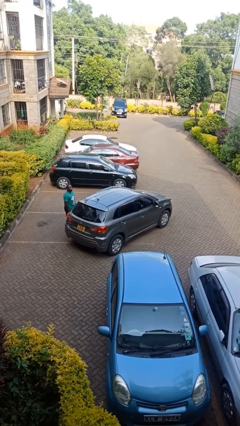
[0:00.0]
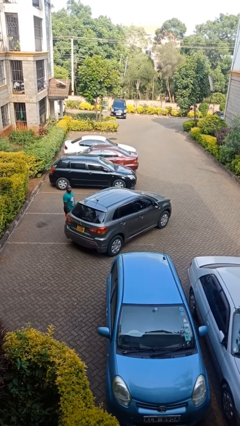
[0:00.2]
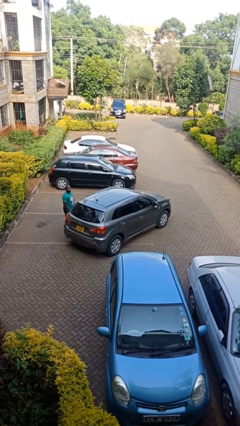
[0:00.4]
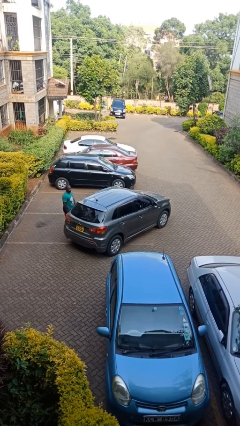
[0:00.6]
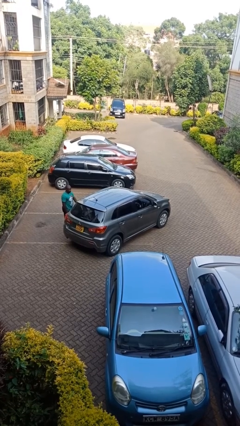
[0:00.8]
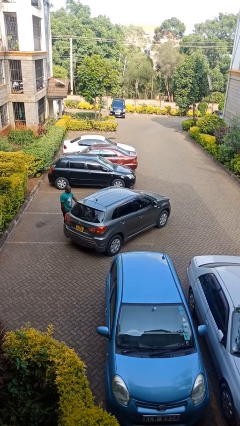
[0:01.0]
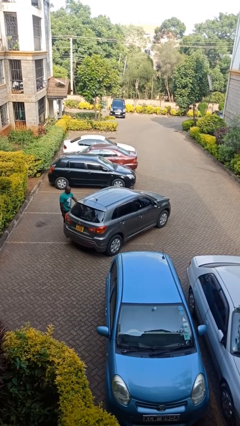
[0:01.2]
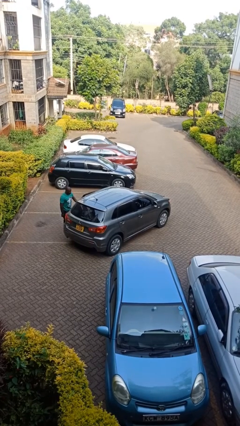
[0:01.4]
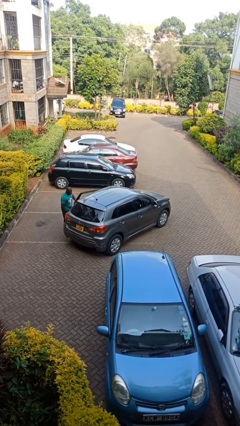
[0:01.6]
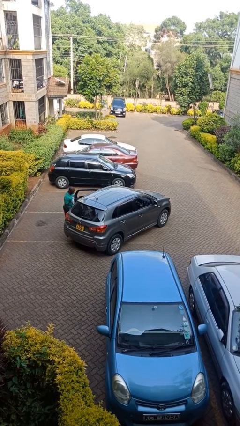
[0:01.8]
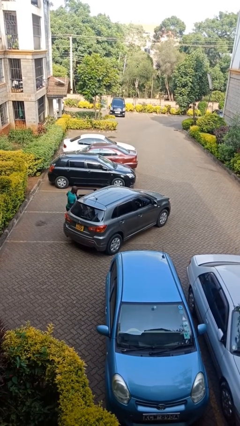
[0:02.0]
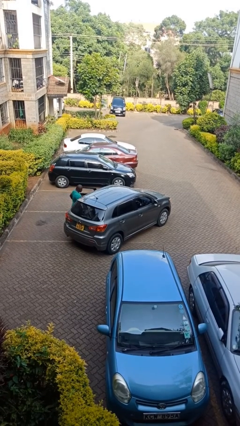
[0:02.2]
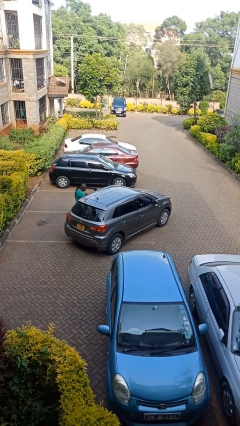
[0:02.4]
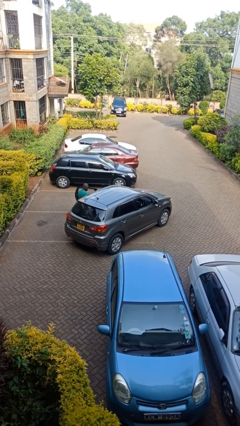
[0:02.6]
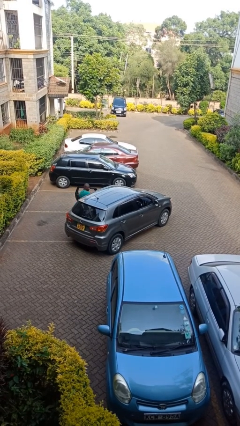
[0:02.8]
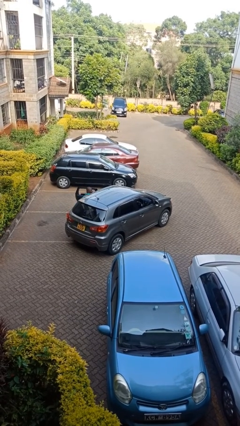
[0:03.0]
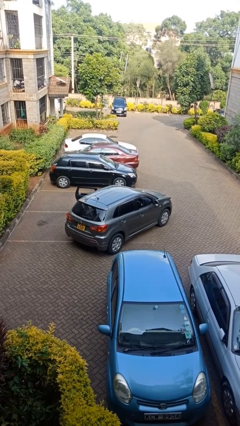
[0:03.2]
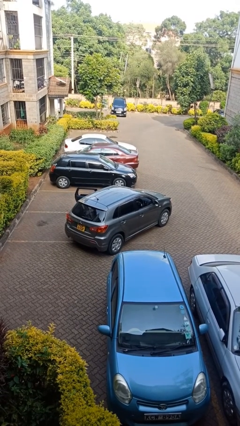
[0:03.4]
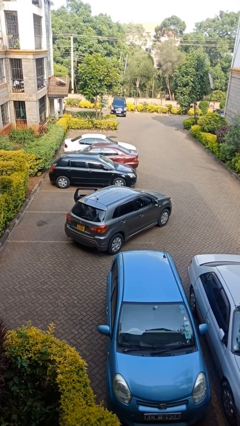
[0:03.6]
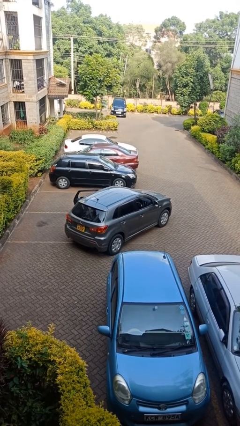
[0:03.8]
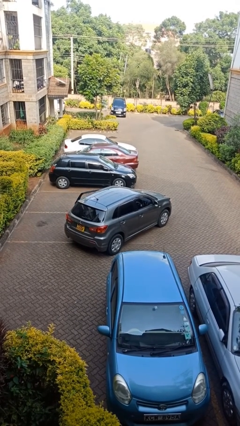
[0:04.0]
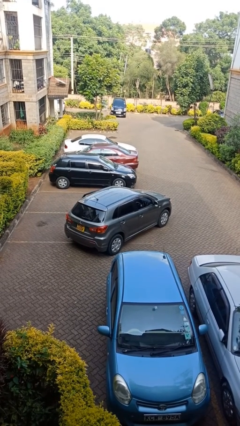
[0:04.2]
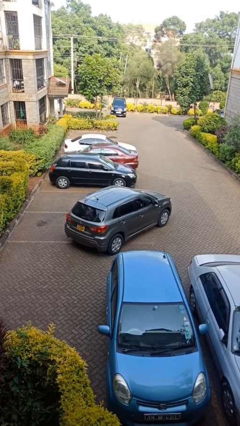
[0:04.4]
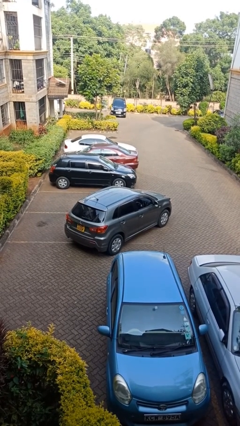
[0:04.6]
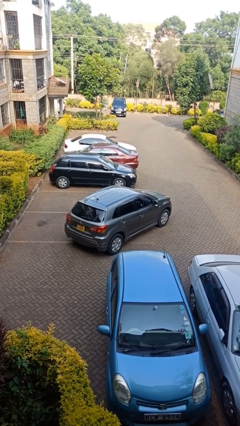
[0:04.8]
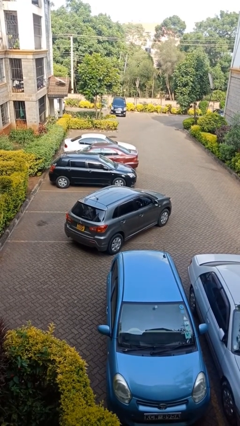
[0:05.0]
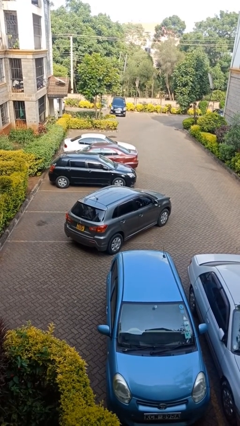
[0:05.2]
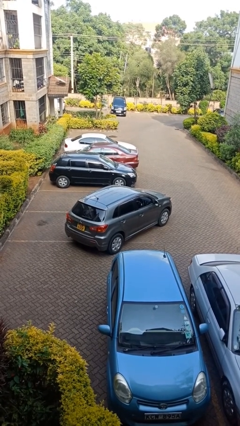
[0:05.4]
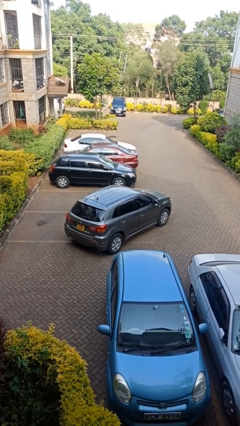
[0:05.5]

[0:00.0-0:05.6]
car picks up person

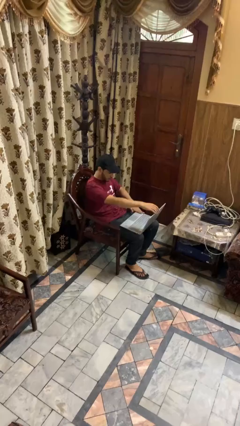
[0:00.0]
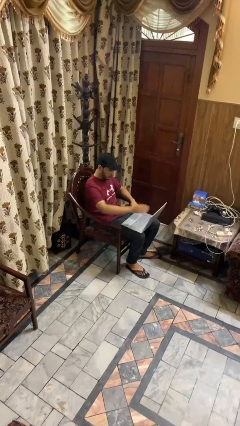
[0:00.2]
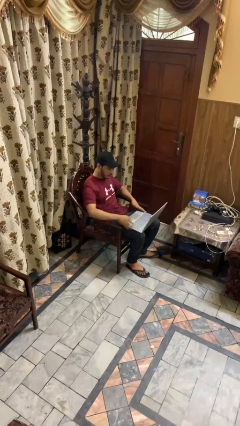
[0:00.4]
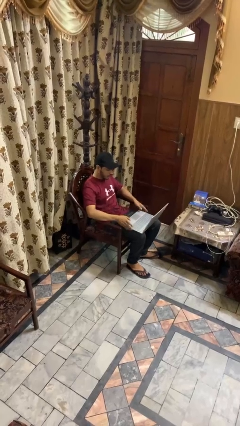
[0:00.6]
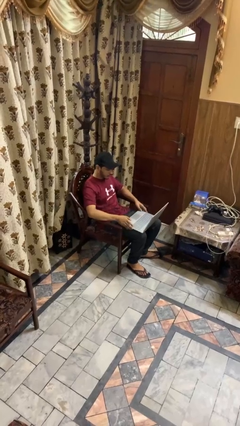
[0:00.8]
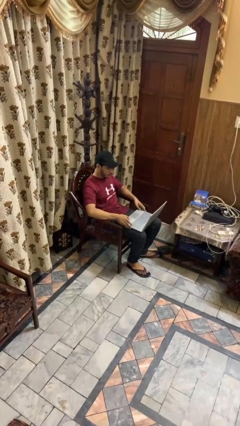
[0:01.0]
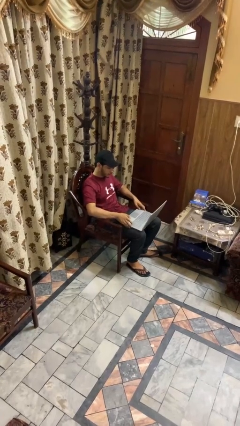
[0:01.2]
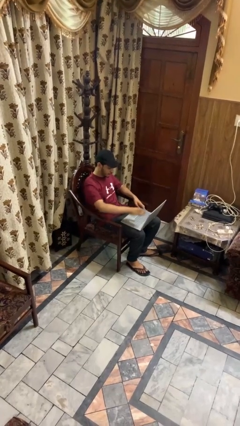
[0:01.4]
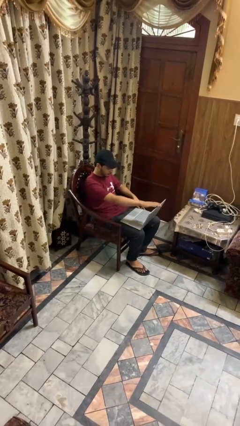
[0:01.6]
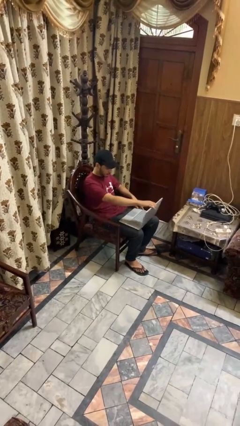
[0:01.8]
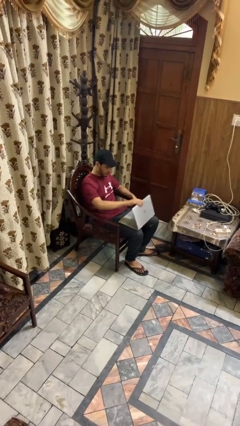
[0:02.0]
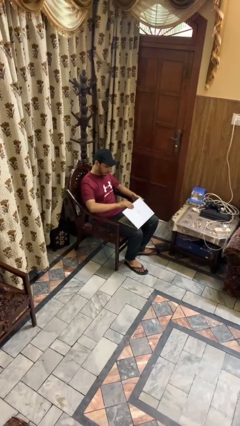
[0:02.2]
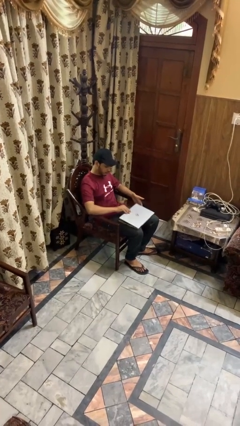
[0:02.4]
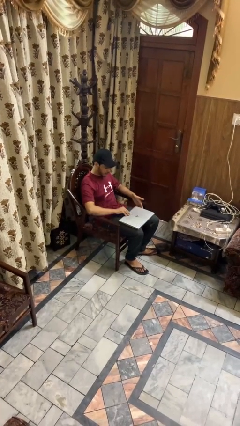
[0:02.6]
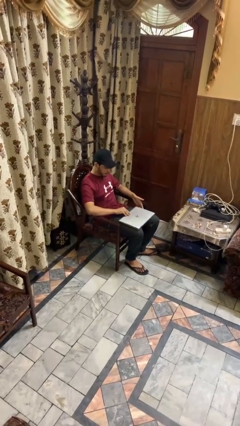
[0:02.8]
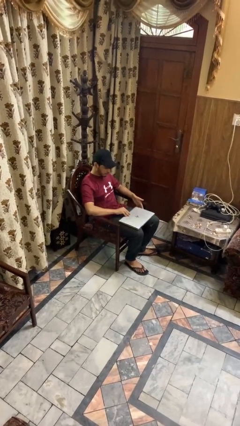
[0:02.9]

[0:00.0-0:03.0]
person closes laptop

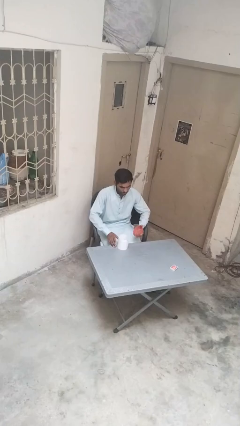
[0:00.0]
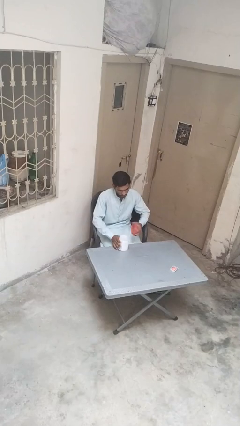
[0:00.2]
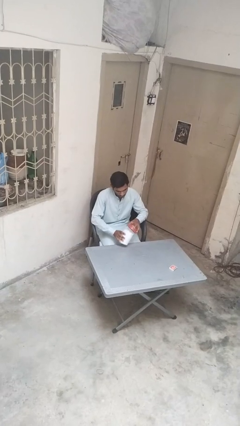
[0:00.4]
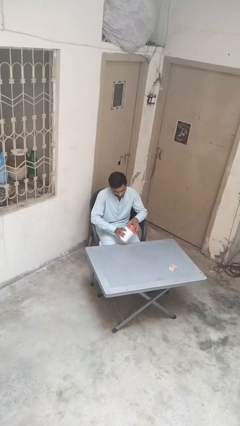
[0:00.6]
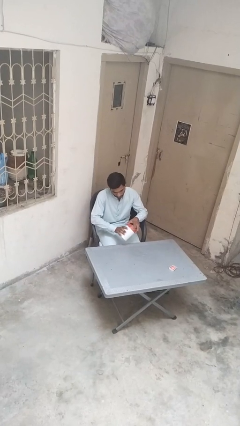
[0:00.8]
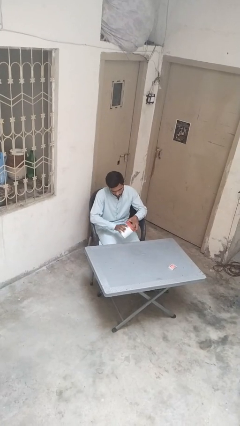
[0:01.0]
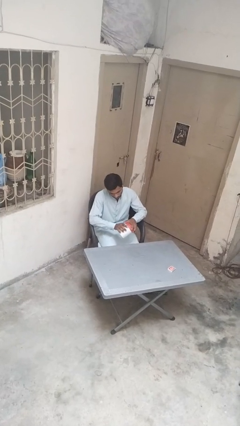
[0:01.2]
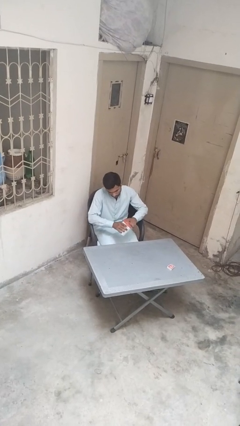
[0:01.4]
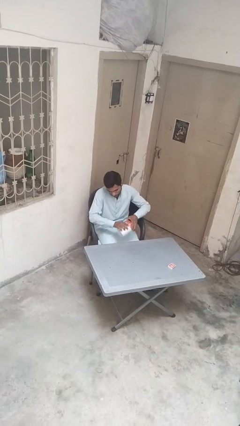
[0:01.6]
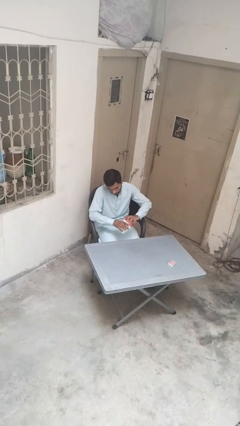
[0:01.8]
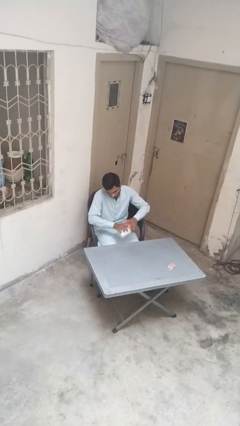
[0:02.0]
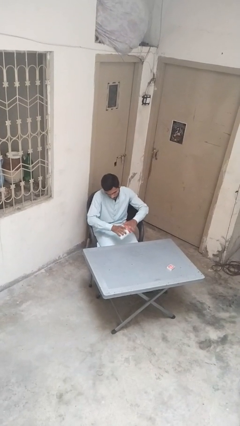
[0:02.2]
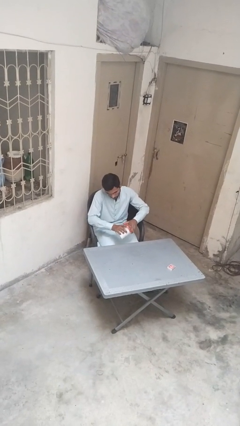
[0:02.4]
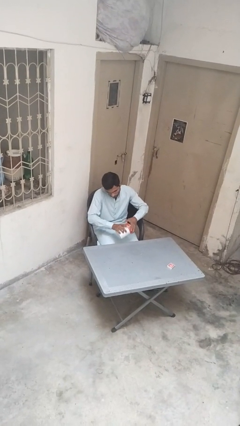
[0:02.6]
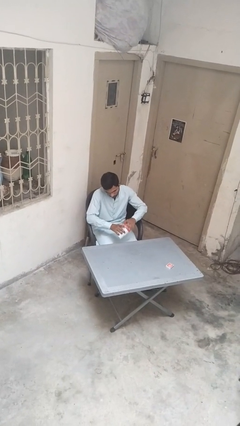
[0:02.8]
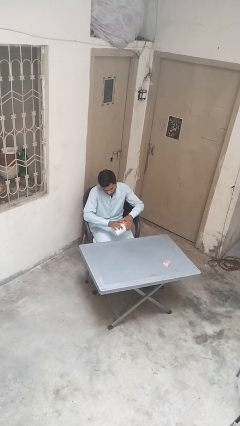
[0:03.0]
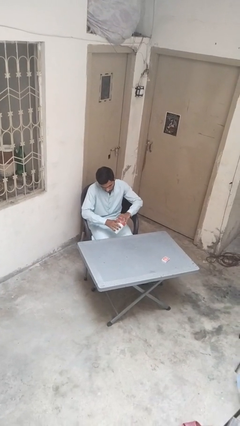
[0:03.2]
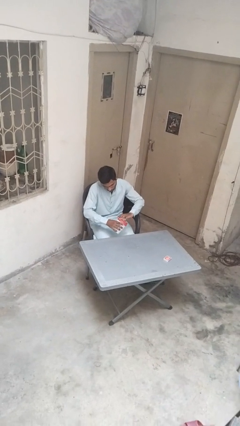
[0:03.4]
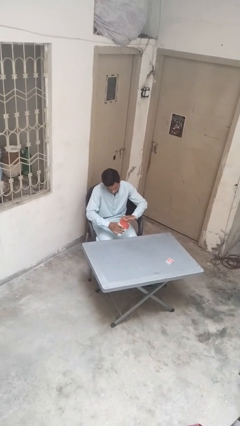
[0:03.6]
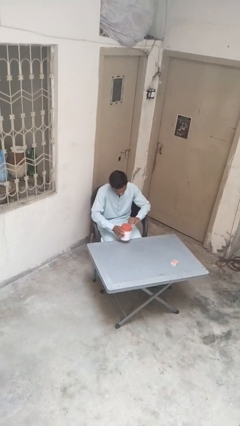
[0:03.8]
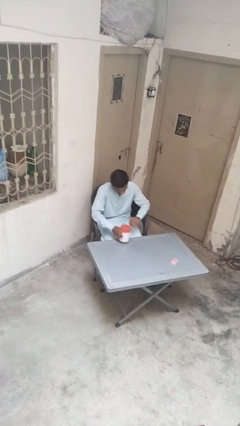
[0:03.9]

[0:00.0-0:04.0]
person closes jar

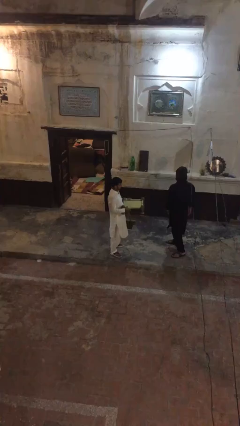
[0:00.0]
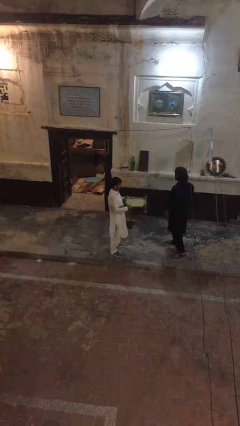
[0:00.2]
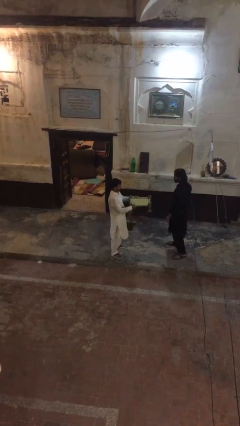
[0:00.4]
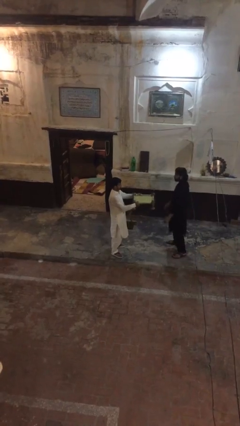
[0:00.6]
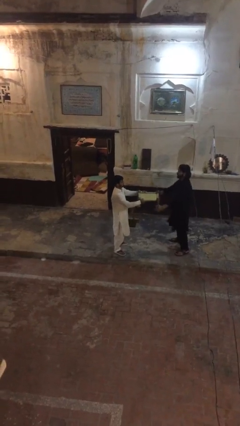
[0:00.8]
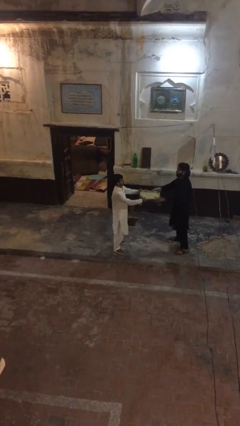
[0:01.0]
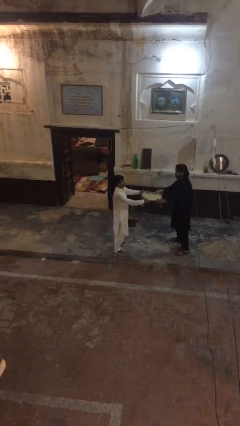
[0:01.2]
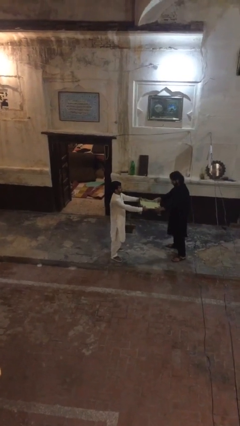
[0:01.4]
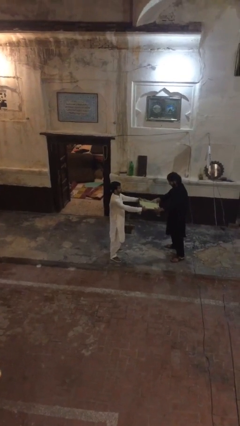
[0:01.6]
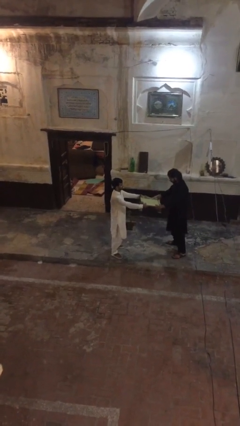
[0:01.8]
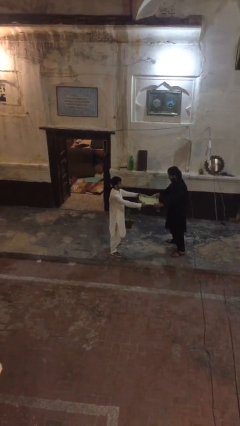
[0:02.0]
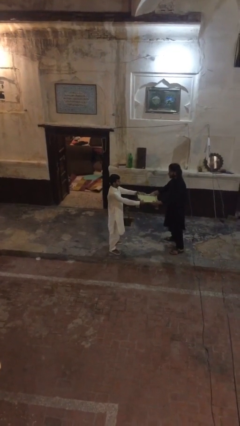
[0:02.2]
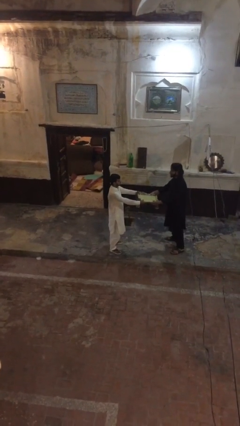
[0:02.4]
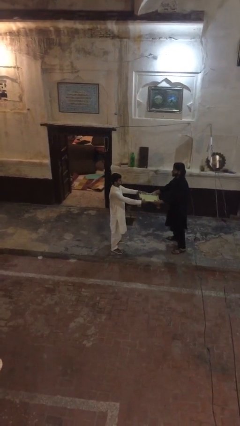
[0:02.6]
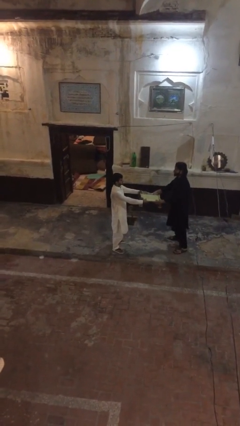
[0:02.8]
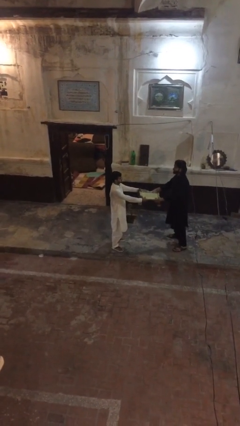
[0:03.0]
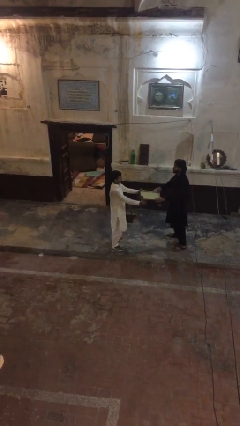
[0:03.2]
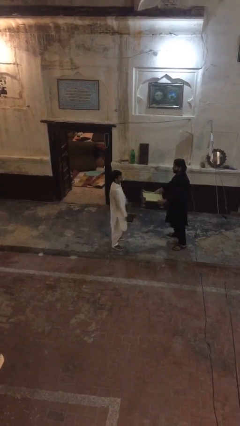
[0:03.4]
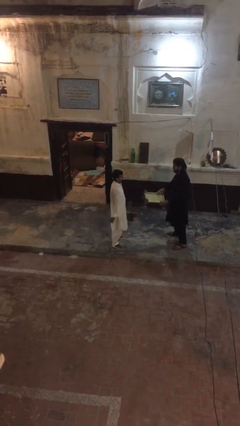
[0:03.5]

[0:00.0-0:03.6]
person transfers object to person

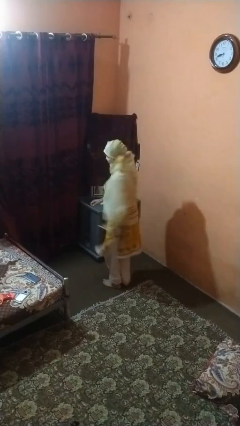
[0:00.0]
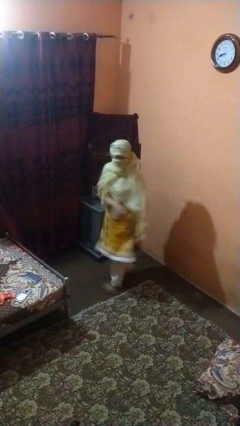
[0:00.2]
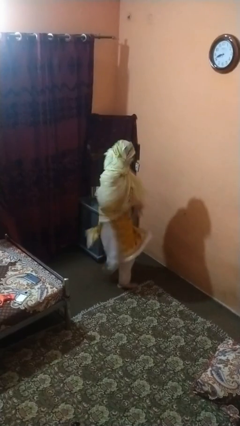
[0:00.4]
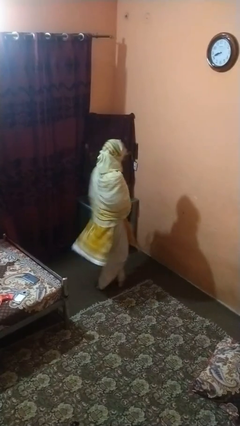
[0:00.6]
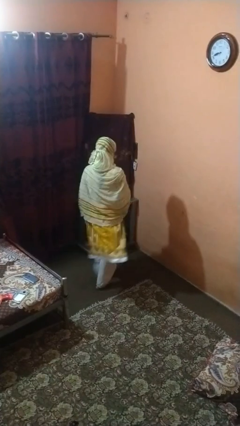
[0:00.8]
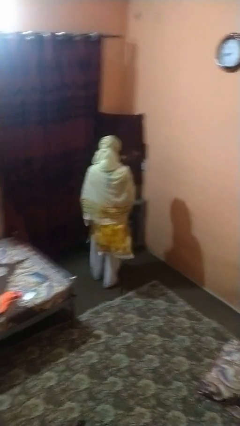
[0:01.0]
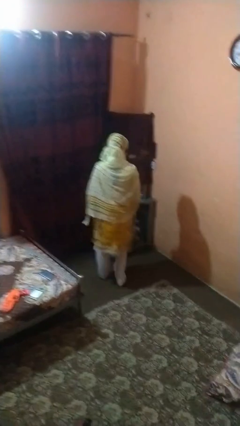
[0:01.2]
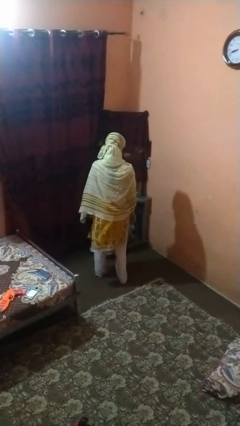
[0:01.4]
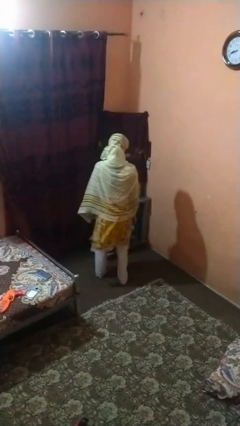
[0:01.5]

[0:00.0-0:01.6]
person twirls
